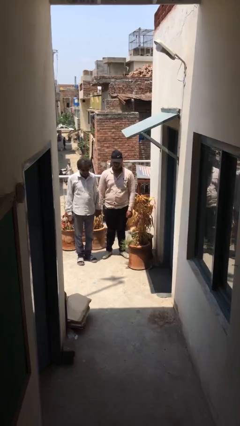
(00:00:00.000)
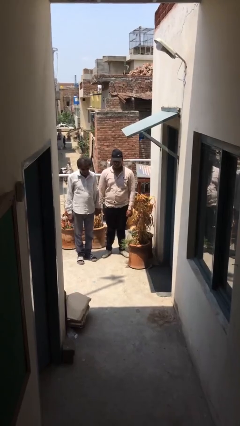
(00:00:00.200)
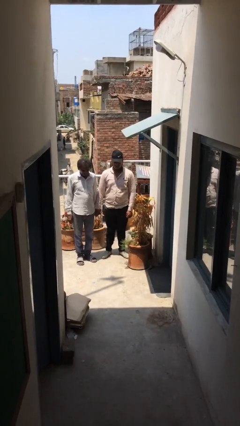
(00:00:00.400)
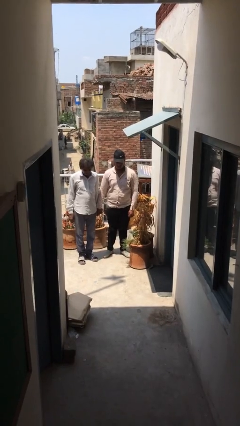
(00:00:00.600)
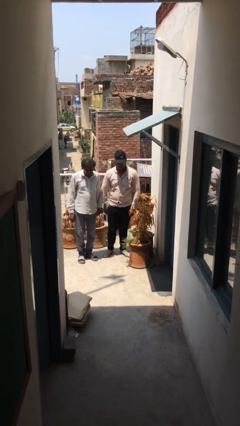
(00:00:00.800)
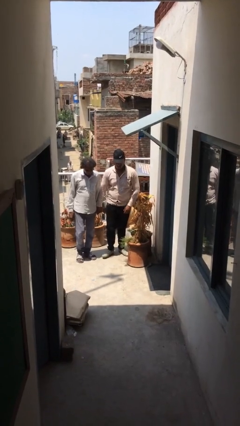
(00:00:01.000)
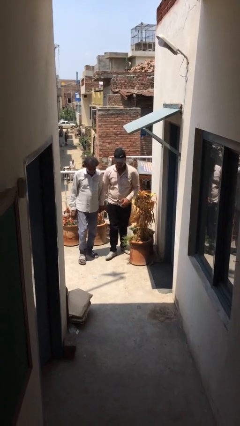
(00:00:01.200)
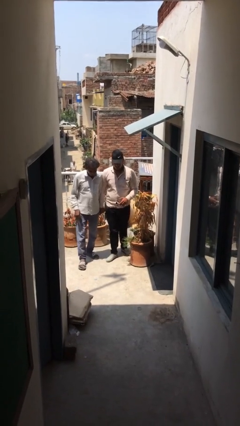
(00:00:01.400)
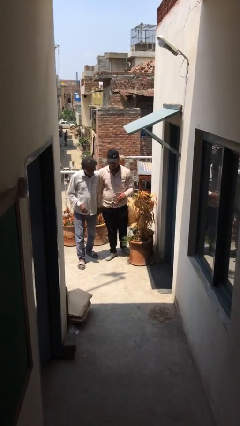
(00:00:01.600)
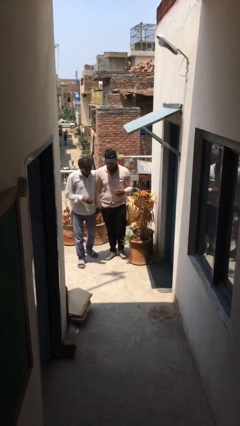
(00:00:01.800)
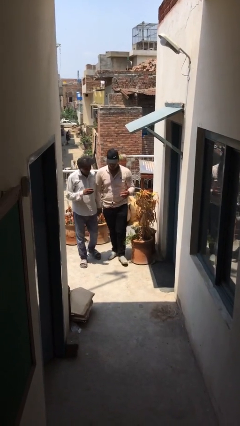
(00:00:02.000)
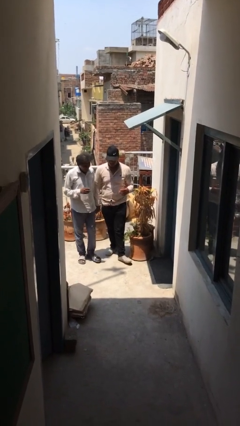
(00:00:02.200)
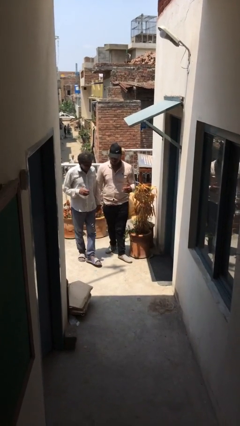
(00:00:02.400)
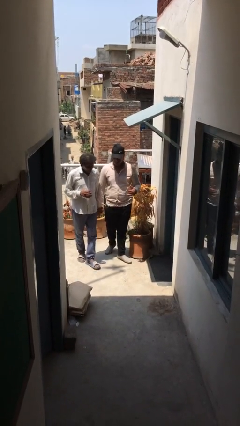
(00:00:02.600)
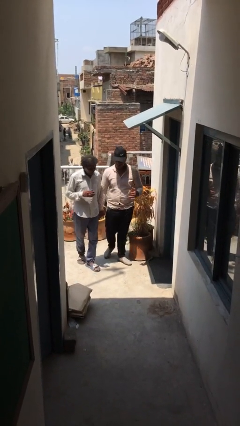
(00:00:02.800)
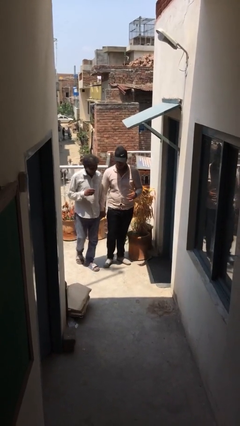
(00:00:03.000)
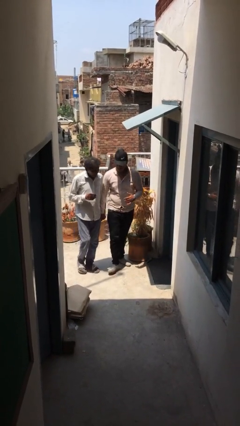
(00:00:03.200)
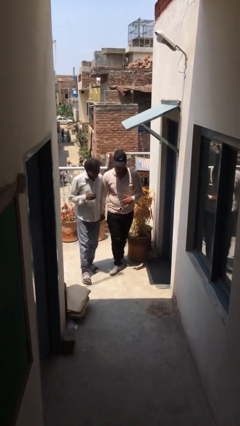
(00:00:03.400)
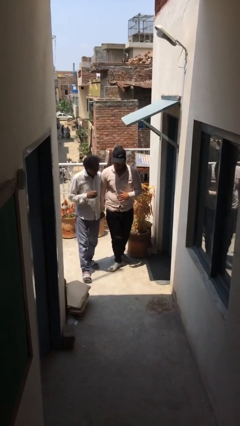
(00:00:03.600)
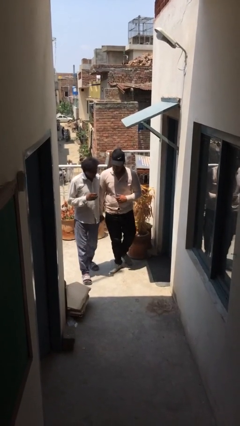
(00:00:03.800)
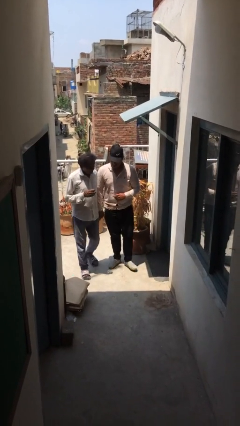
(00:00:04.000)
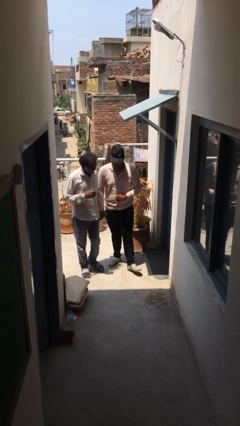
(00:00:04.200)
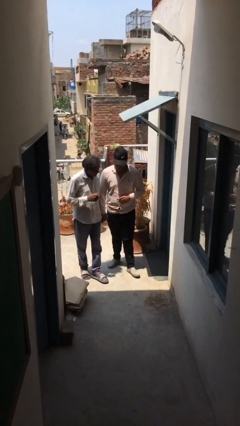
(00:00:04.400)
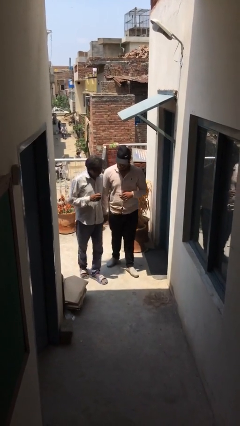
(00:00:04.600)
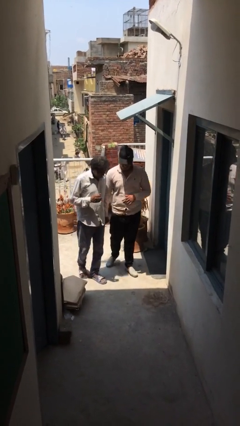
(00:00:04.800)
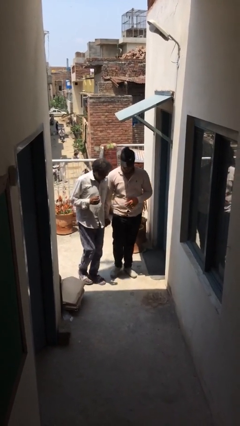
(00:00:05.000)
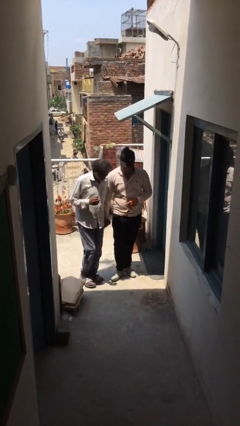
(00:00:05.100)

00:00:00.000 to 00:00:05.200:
person holds hand

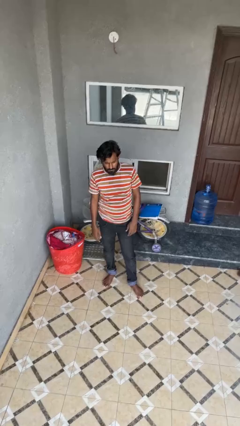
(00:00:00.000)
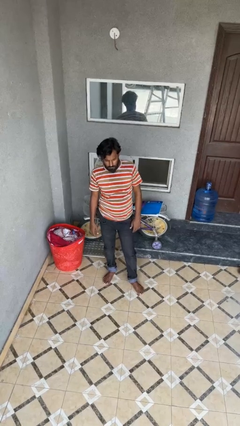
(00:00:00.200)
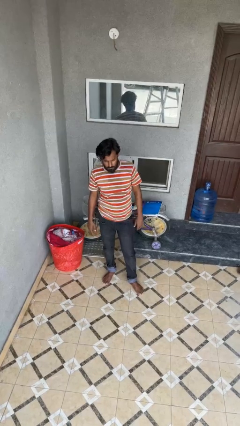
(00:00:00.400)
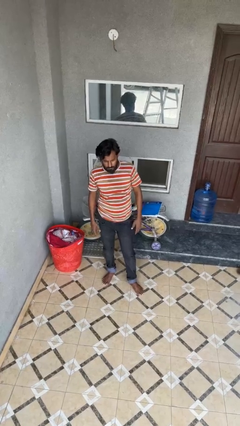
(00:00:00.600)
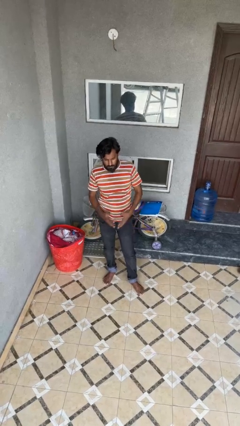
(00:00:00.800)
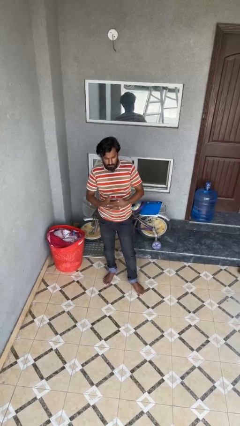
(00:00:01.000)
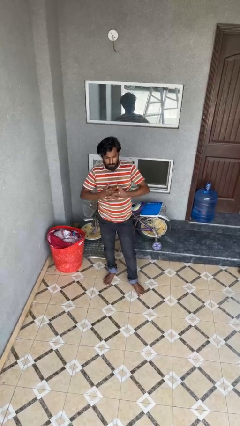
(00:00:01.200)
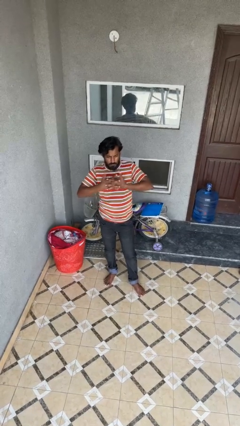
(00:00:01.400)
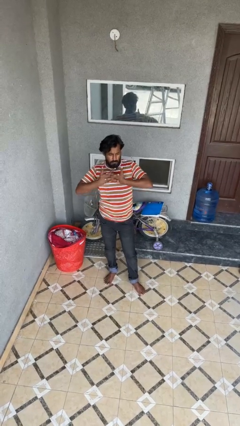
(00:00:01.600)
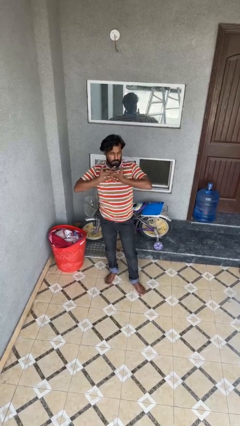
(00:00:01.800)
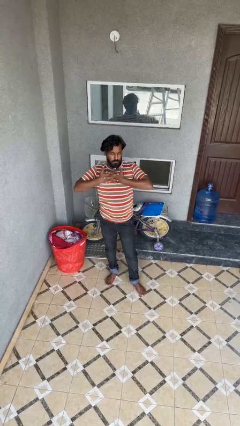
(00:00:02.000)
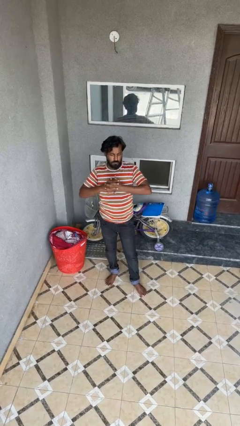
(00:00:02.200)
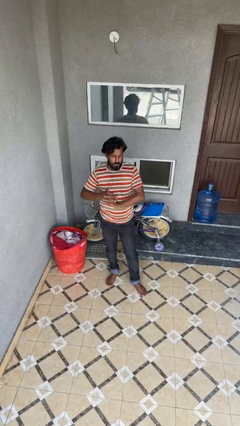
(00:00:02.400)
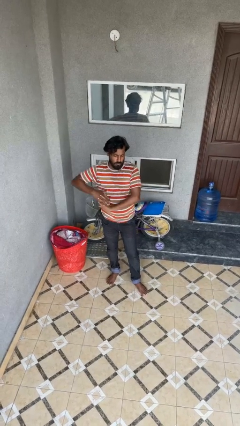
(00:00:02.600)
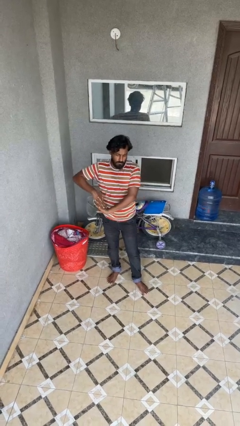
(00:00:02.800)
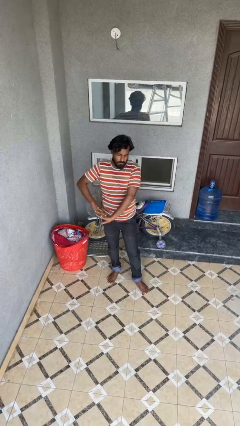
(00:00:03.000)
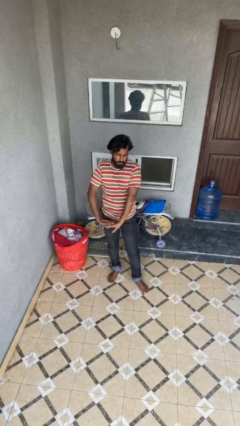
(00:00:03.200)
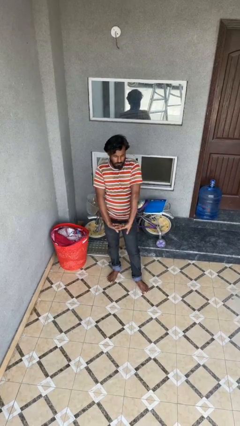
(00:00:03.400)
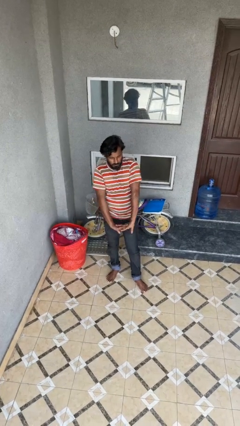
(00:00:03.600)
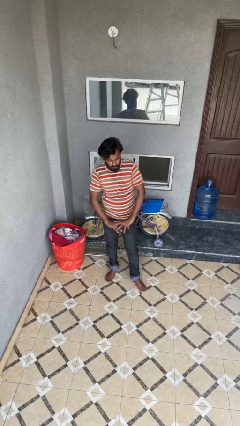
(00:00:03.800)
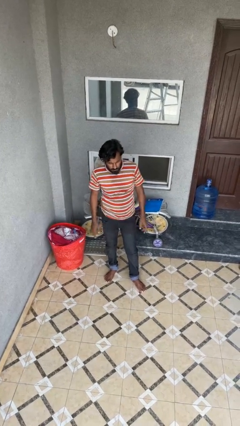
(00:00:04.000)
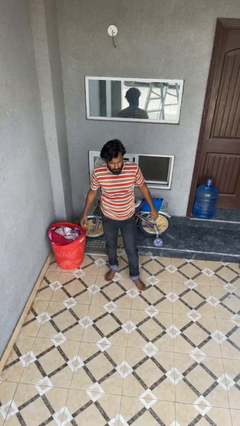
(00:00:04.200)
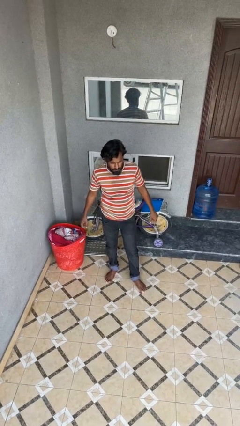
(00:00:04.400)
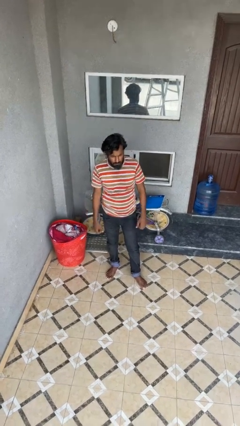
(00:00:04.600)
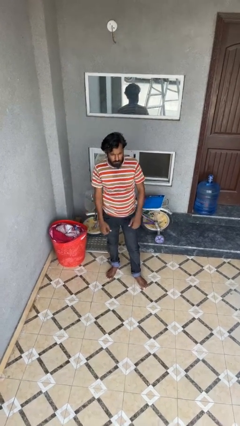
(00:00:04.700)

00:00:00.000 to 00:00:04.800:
person cracks knuckles

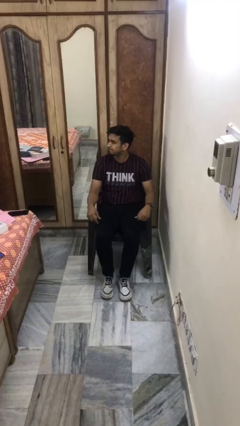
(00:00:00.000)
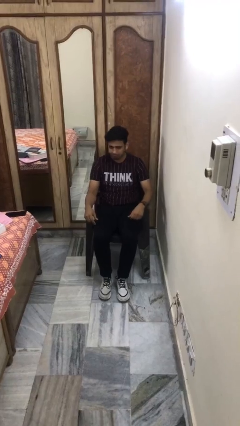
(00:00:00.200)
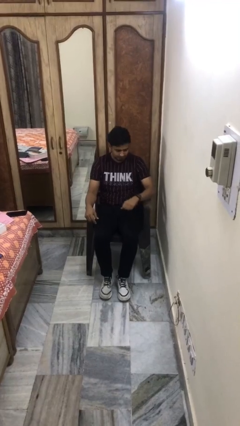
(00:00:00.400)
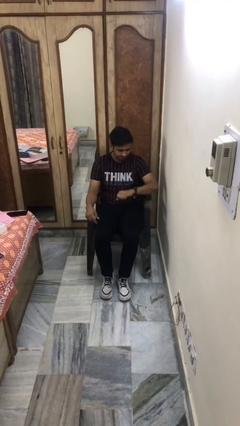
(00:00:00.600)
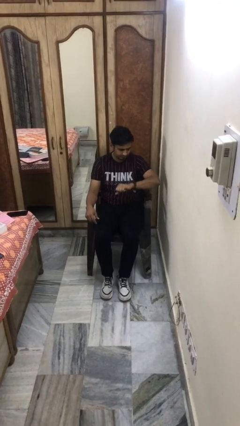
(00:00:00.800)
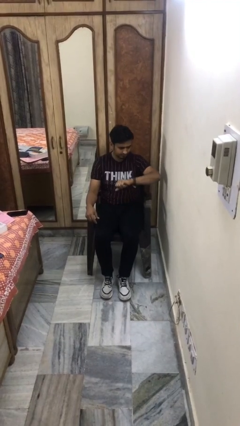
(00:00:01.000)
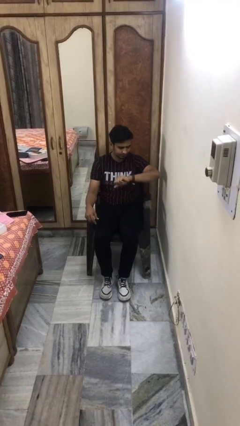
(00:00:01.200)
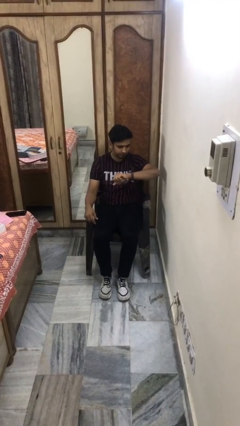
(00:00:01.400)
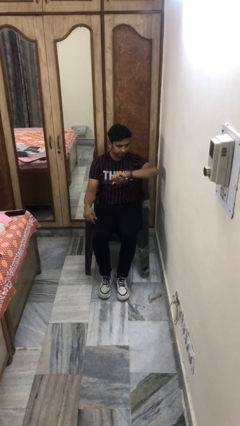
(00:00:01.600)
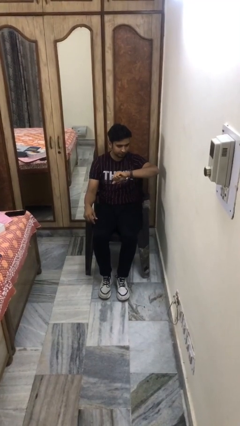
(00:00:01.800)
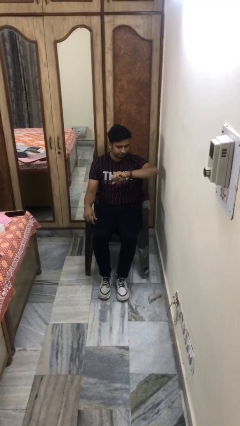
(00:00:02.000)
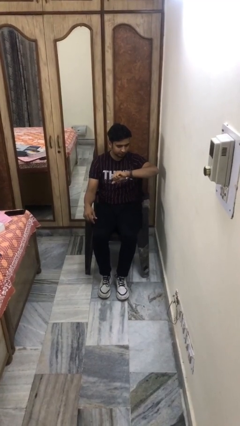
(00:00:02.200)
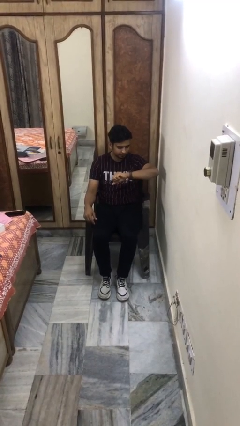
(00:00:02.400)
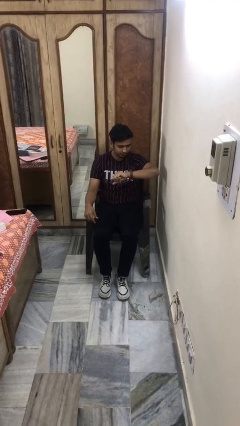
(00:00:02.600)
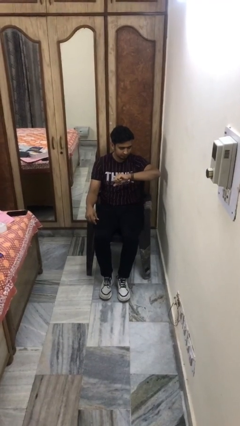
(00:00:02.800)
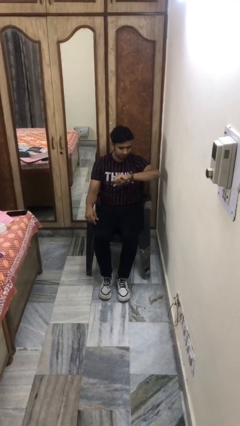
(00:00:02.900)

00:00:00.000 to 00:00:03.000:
person looks at wristwatch

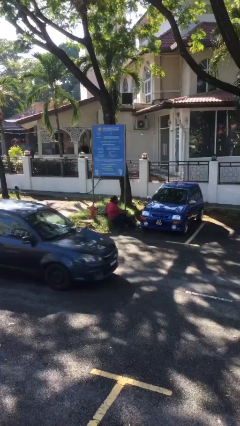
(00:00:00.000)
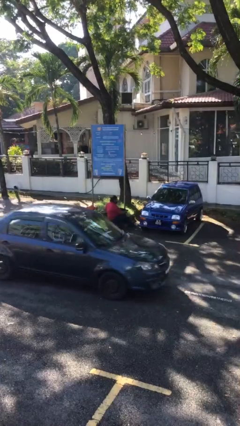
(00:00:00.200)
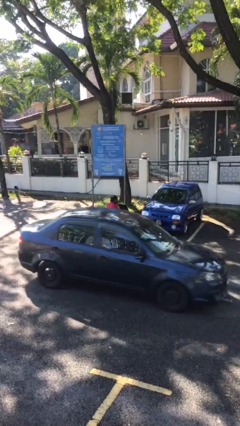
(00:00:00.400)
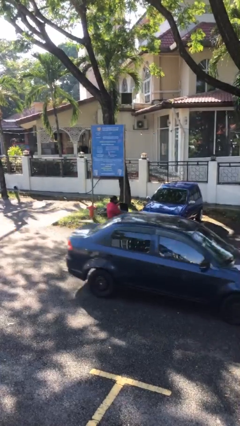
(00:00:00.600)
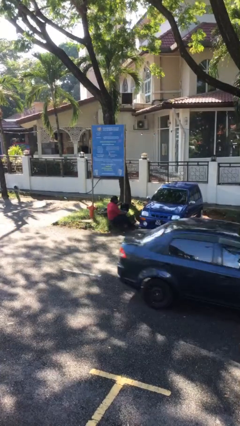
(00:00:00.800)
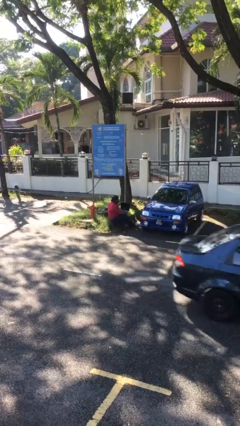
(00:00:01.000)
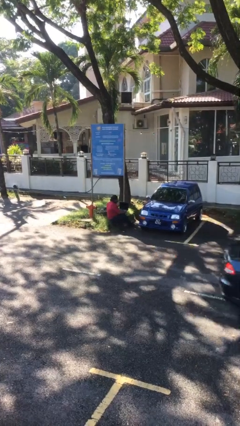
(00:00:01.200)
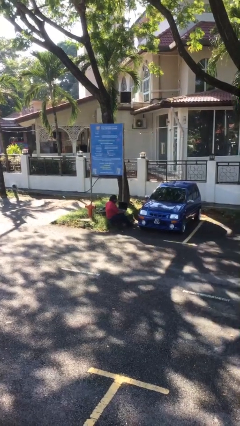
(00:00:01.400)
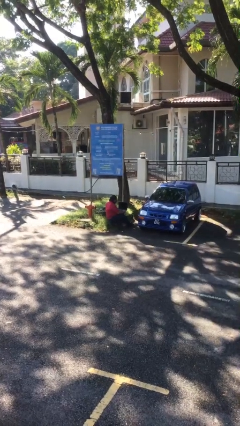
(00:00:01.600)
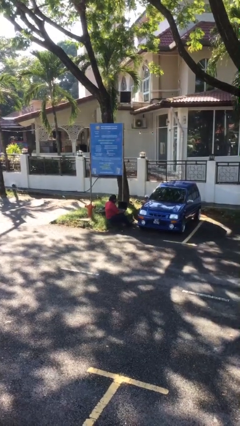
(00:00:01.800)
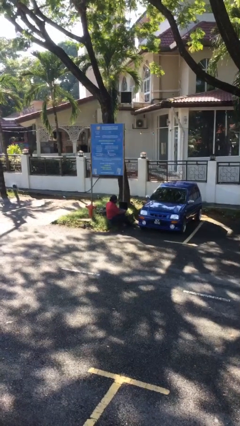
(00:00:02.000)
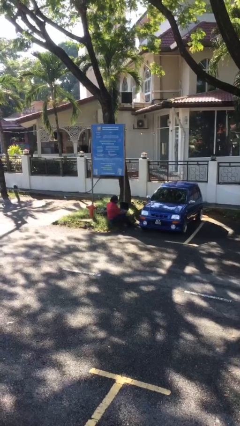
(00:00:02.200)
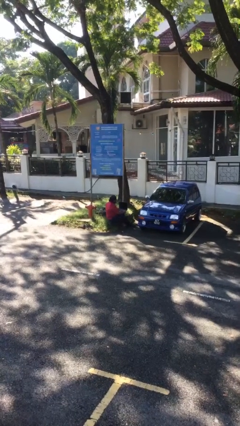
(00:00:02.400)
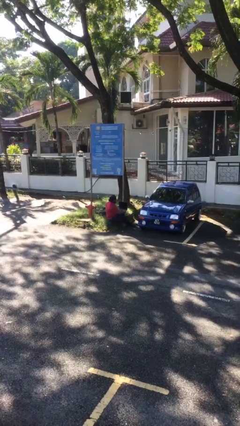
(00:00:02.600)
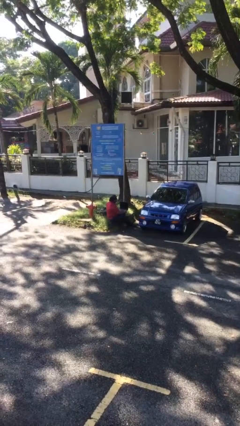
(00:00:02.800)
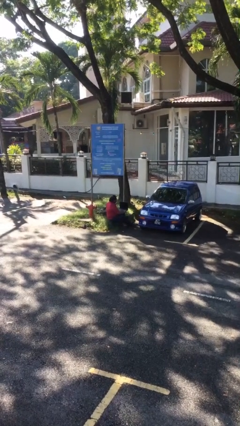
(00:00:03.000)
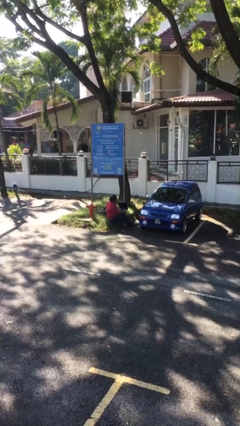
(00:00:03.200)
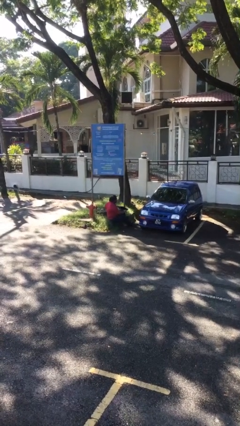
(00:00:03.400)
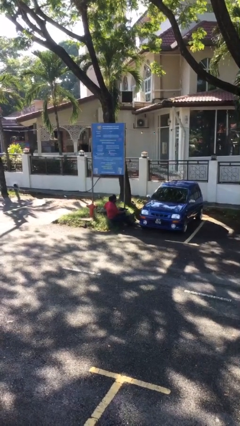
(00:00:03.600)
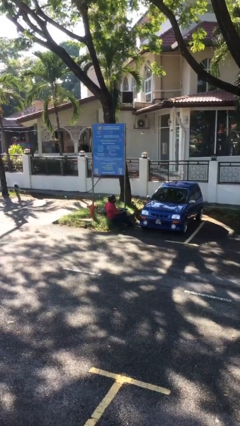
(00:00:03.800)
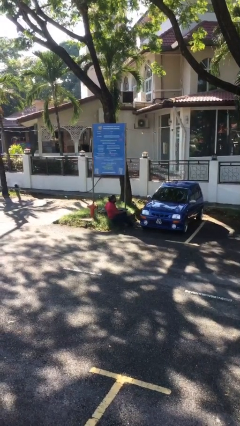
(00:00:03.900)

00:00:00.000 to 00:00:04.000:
person interacts with laptop

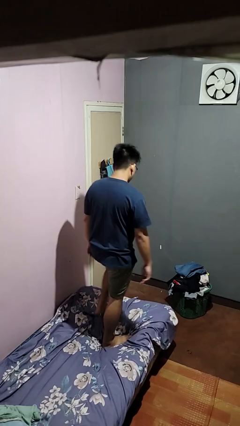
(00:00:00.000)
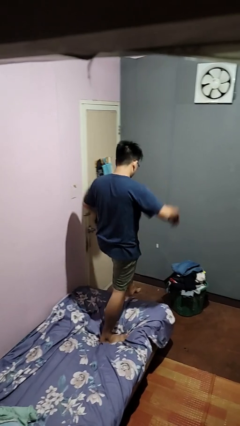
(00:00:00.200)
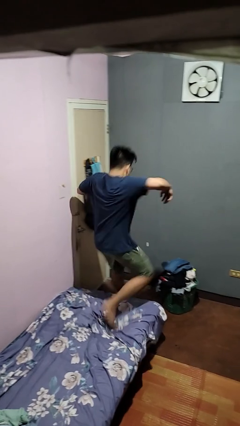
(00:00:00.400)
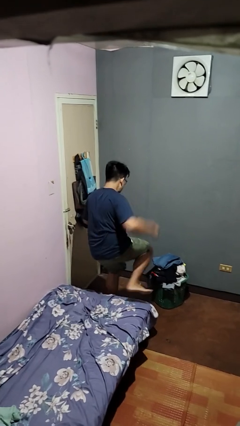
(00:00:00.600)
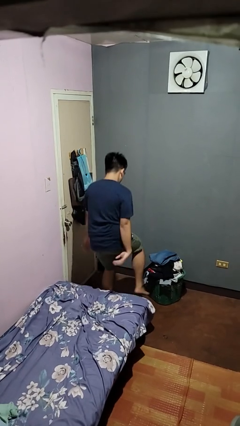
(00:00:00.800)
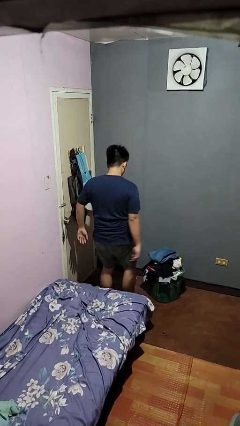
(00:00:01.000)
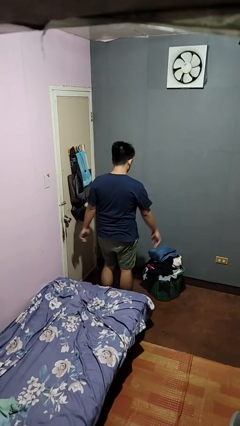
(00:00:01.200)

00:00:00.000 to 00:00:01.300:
person jumps on bed
